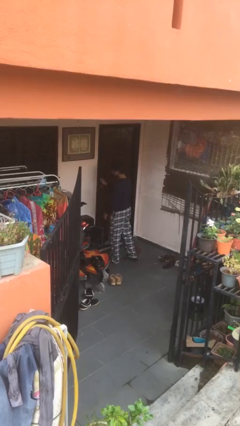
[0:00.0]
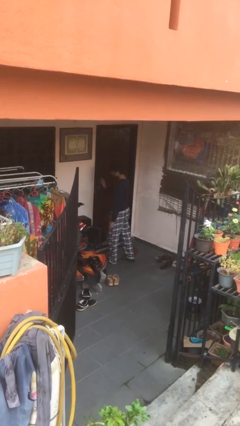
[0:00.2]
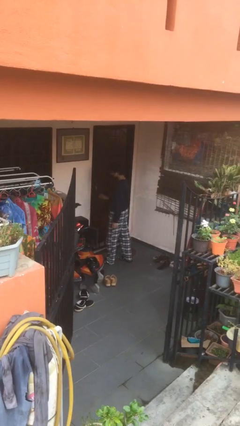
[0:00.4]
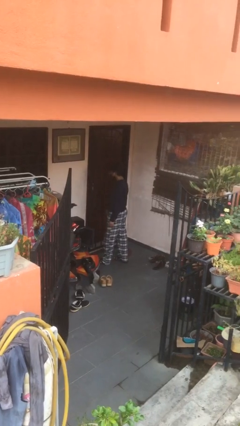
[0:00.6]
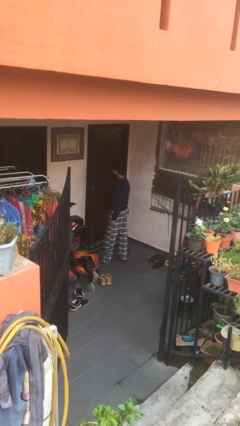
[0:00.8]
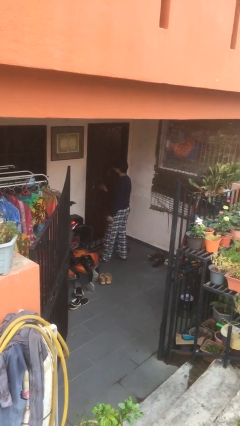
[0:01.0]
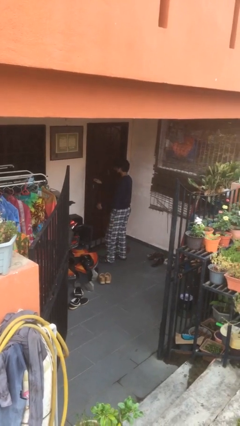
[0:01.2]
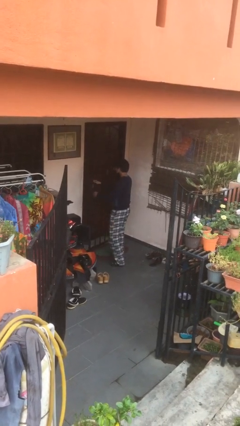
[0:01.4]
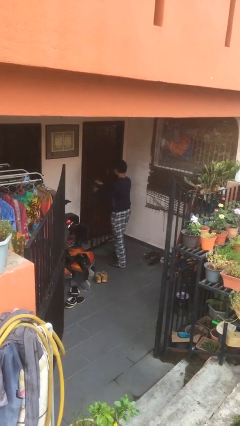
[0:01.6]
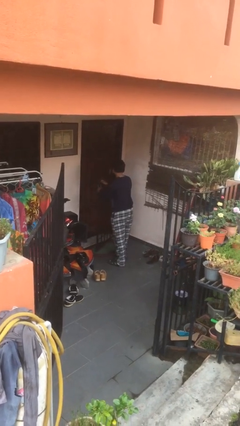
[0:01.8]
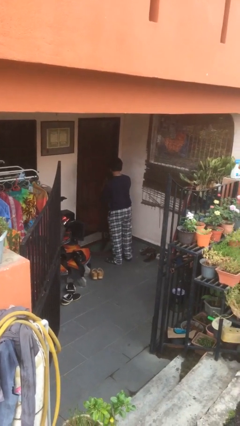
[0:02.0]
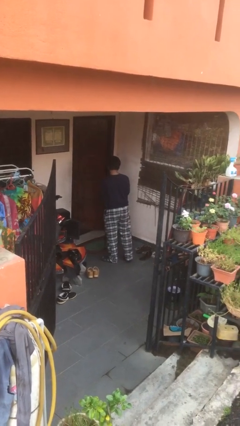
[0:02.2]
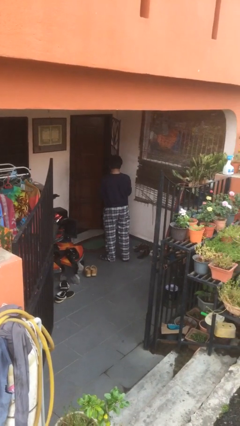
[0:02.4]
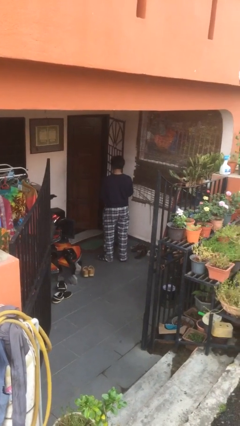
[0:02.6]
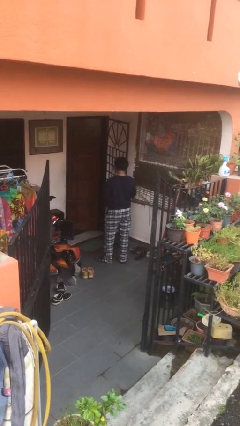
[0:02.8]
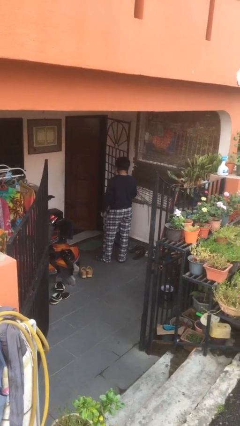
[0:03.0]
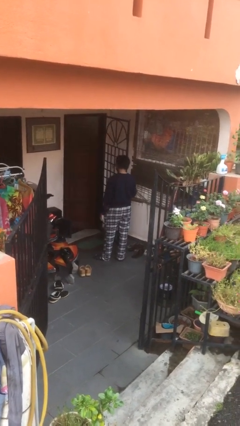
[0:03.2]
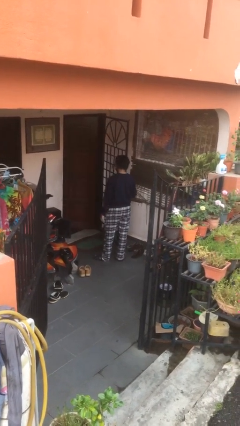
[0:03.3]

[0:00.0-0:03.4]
person opens facility door

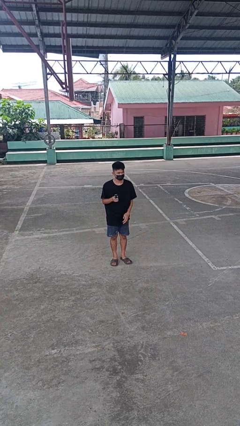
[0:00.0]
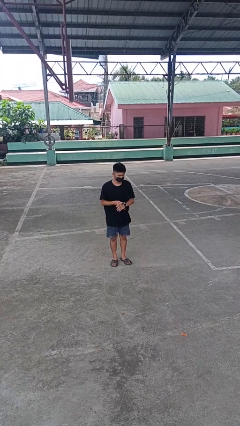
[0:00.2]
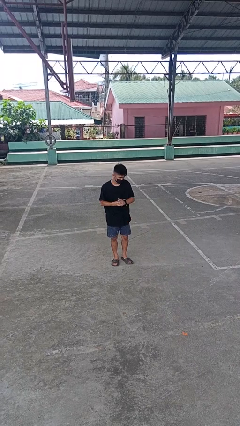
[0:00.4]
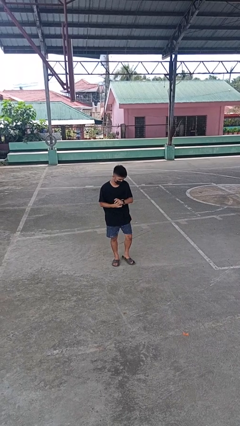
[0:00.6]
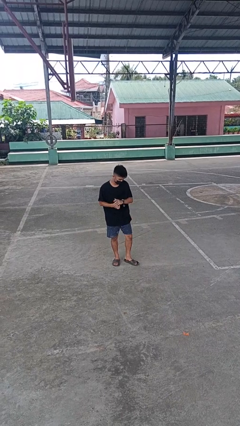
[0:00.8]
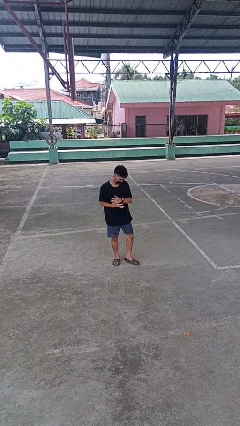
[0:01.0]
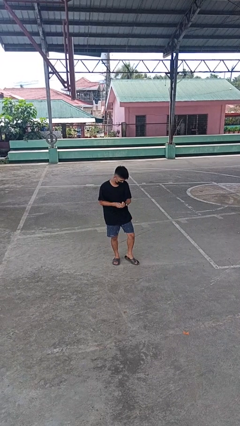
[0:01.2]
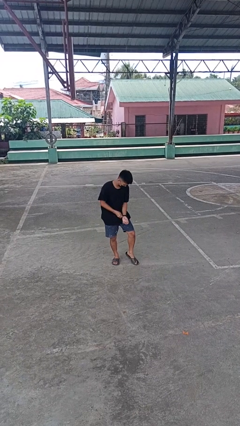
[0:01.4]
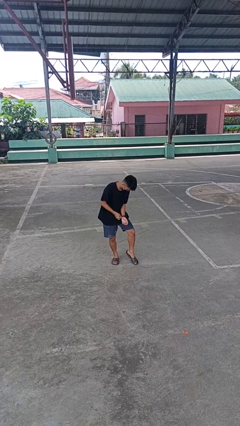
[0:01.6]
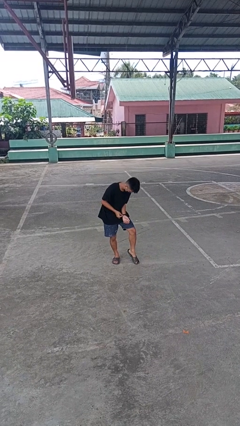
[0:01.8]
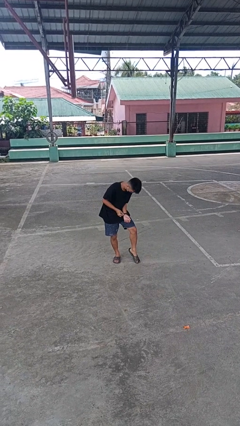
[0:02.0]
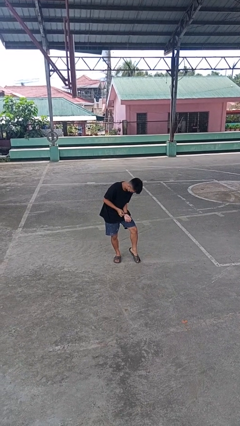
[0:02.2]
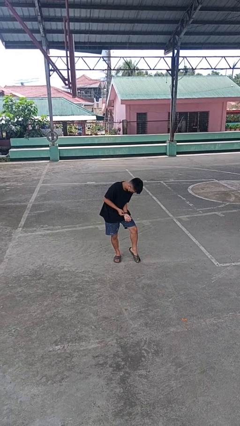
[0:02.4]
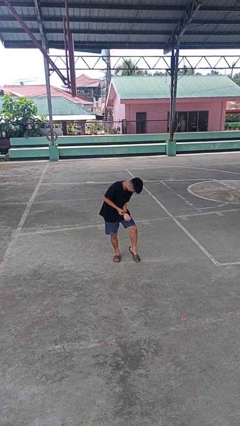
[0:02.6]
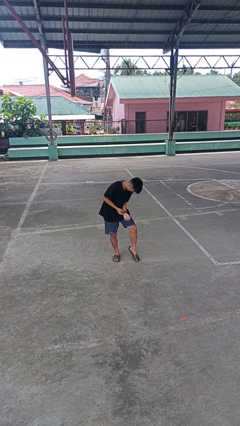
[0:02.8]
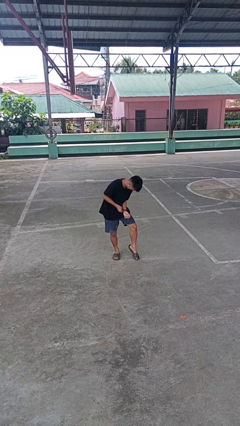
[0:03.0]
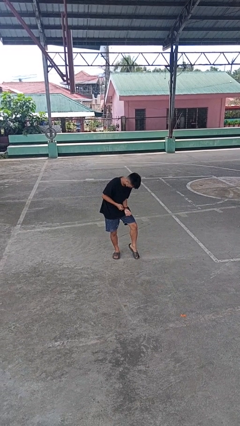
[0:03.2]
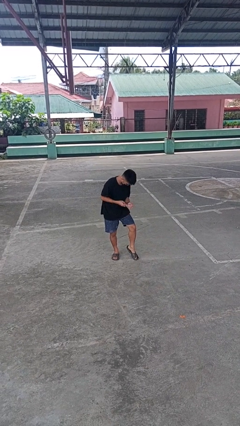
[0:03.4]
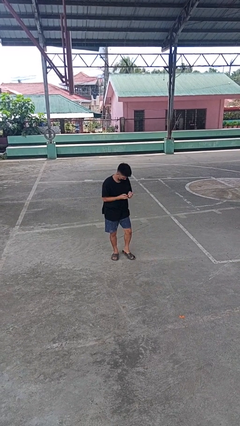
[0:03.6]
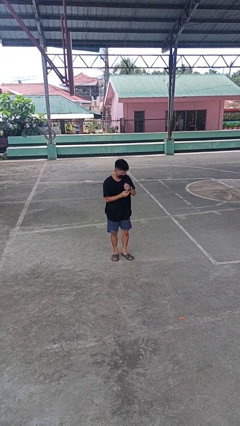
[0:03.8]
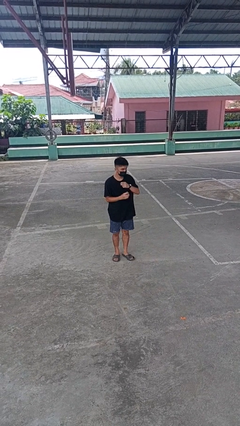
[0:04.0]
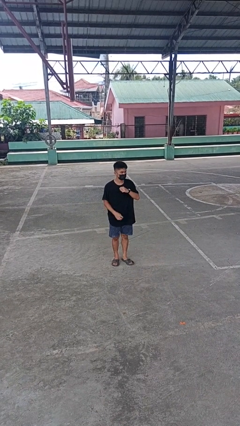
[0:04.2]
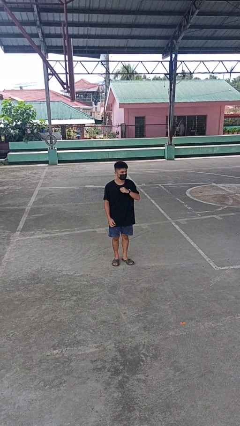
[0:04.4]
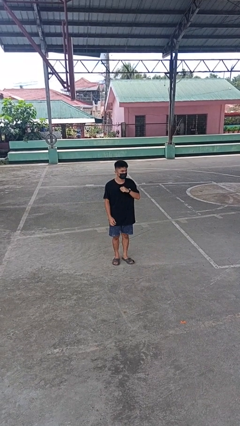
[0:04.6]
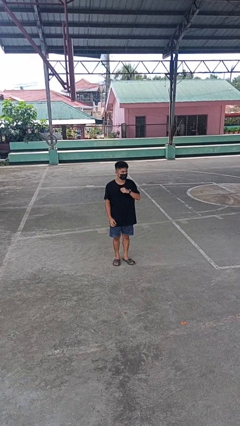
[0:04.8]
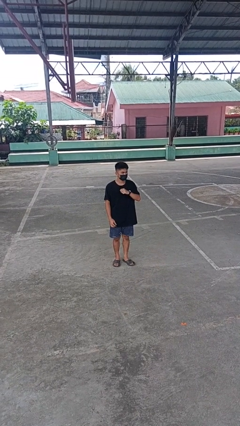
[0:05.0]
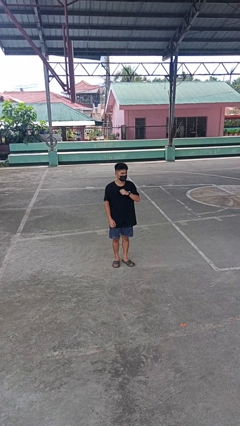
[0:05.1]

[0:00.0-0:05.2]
person puts on wristwatch

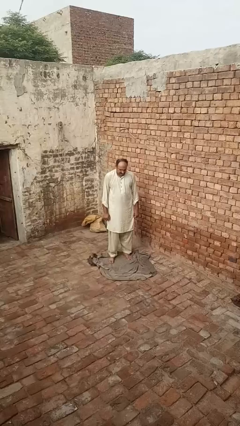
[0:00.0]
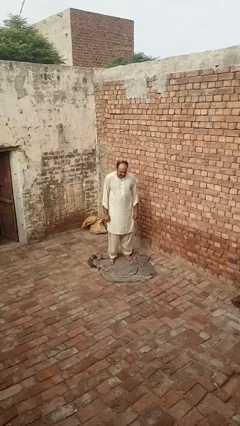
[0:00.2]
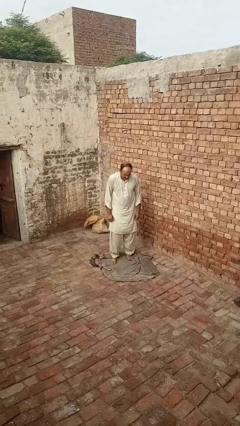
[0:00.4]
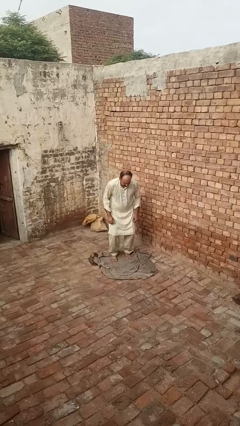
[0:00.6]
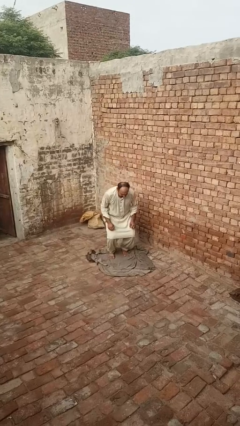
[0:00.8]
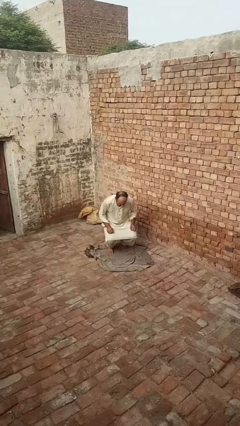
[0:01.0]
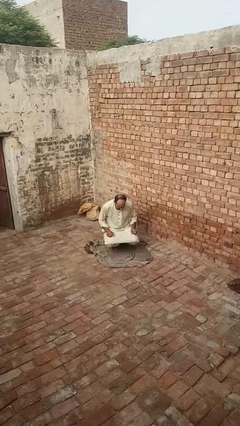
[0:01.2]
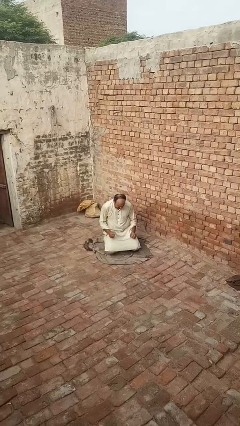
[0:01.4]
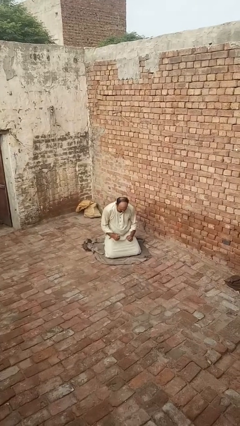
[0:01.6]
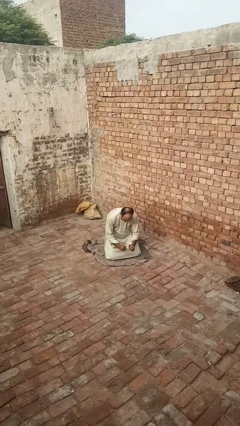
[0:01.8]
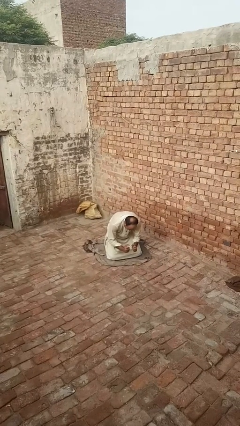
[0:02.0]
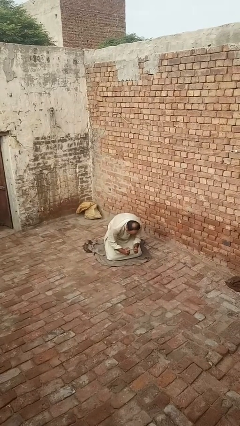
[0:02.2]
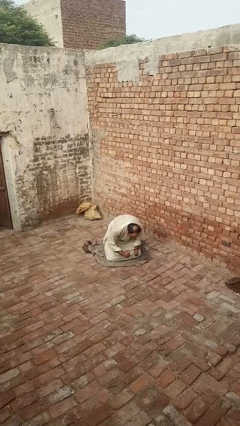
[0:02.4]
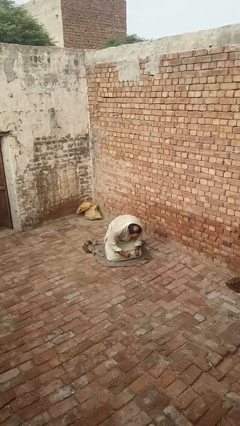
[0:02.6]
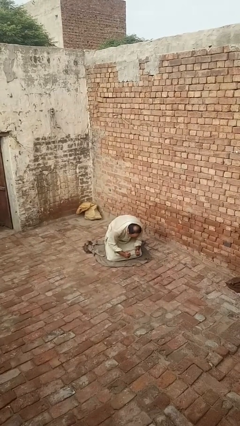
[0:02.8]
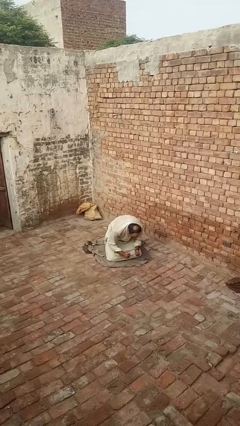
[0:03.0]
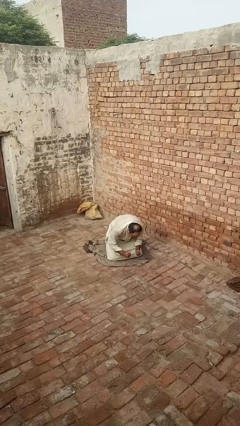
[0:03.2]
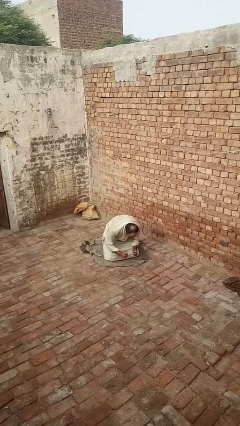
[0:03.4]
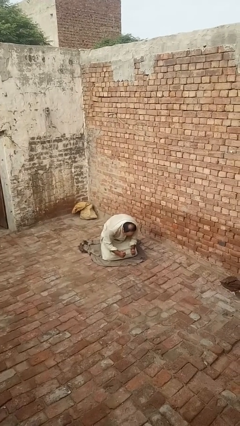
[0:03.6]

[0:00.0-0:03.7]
person kneels

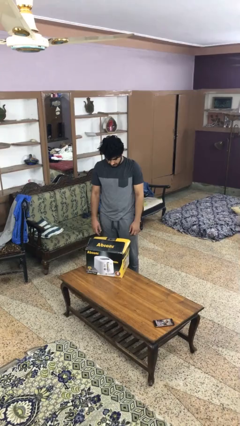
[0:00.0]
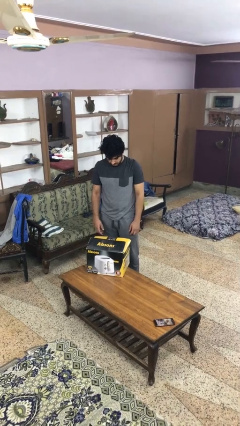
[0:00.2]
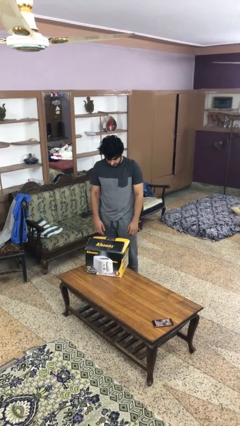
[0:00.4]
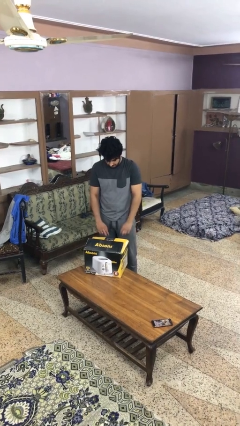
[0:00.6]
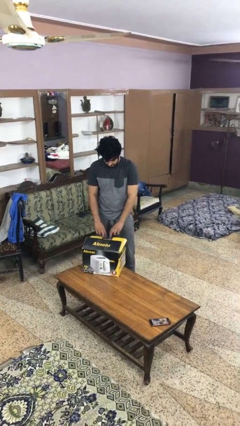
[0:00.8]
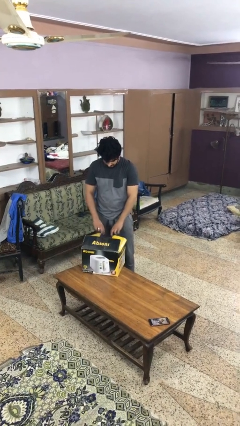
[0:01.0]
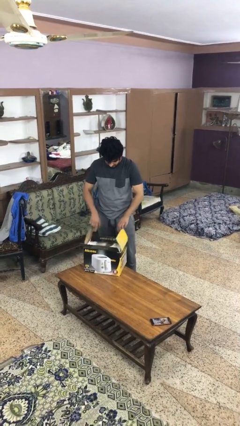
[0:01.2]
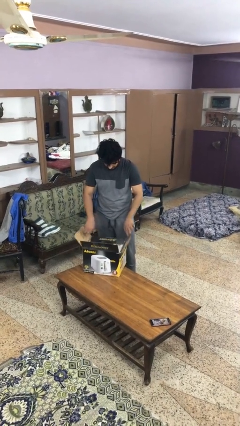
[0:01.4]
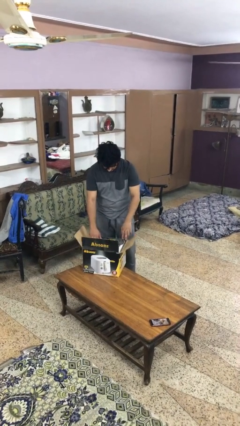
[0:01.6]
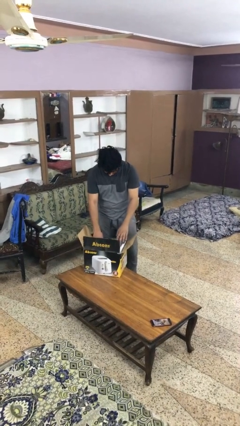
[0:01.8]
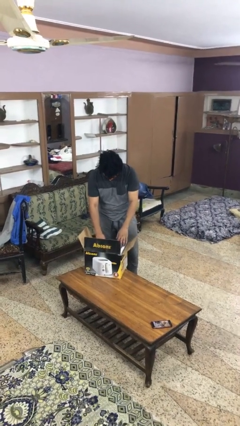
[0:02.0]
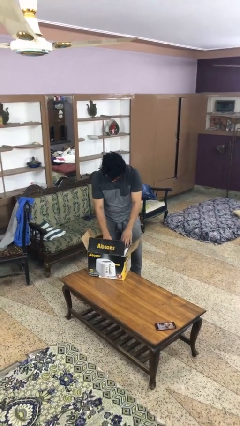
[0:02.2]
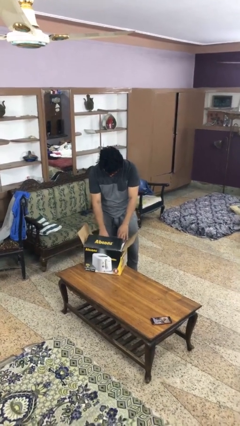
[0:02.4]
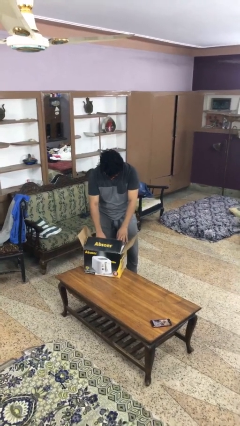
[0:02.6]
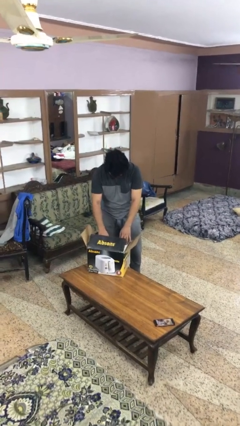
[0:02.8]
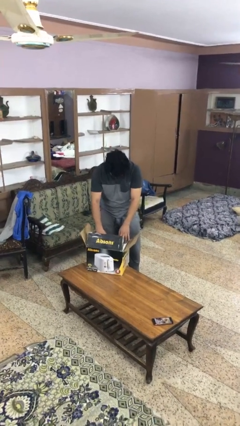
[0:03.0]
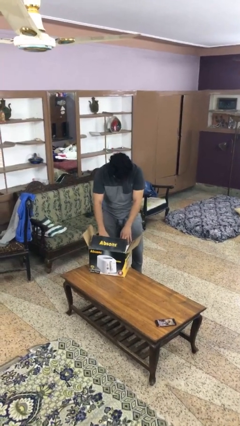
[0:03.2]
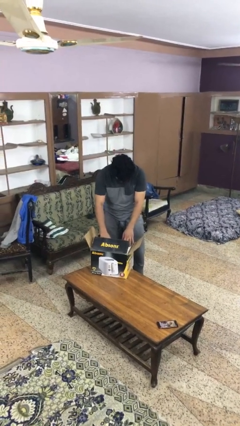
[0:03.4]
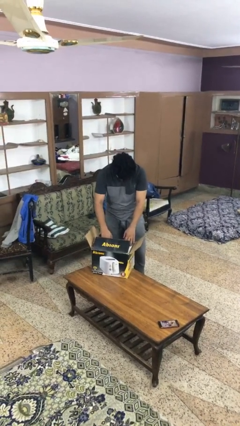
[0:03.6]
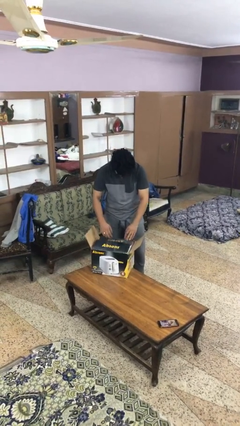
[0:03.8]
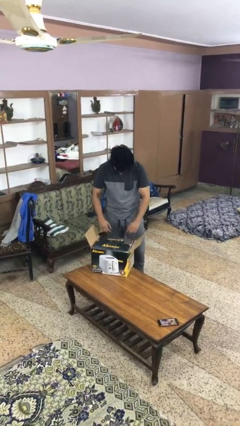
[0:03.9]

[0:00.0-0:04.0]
person searches in box

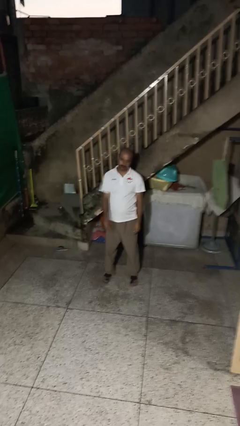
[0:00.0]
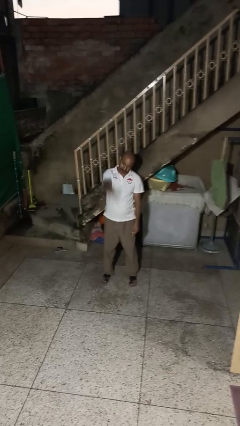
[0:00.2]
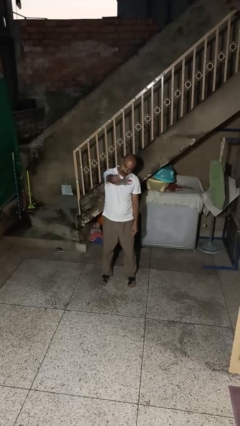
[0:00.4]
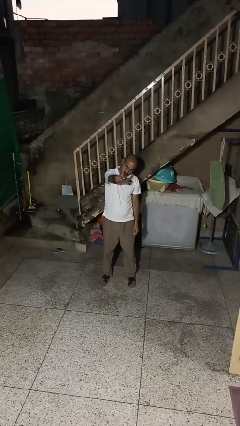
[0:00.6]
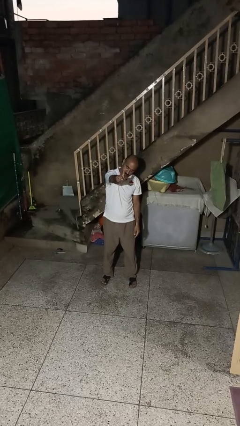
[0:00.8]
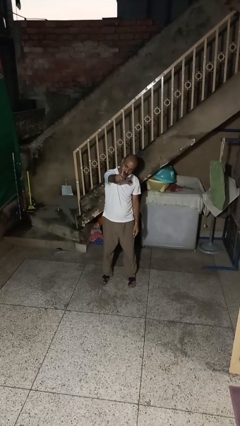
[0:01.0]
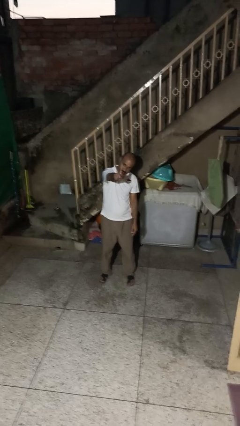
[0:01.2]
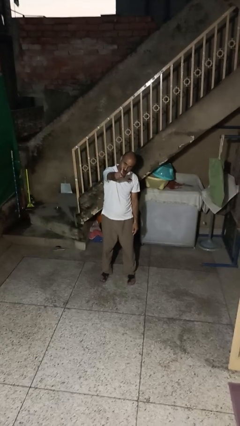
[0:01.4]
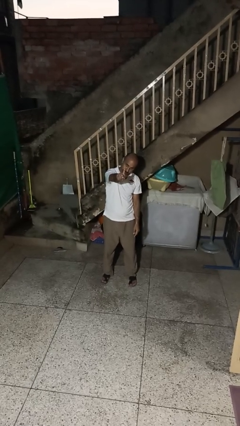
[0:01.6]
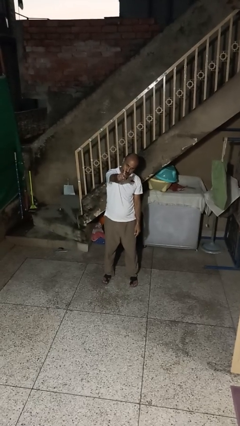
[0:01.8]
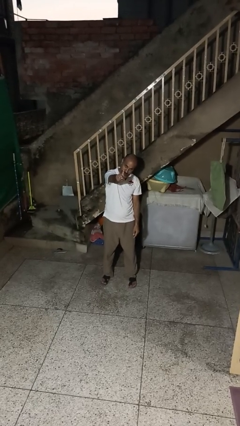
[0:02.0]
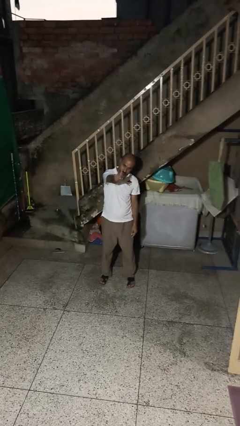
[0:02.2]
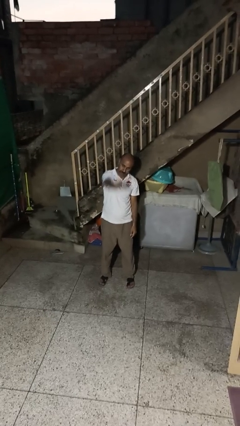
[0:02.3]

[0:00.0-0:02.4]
person gestures number one
